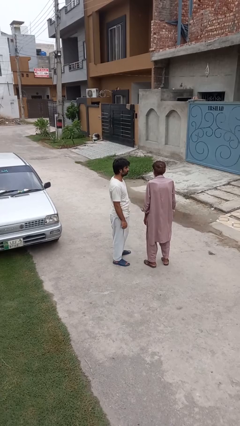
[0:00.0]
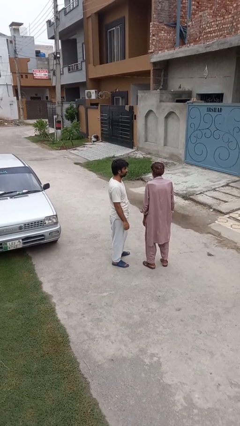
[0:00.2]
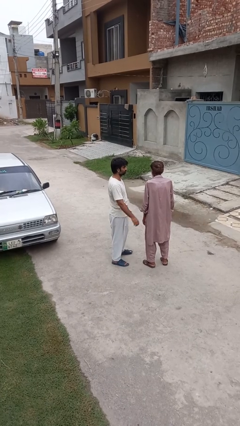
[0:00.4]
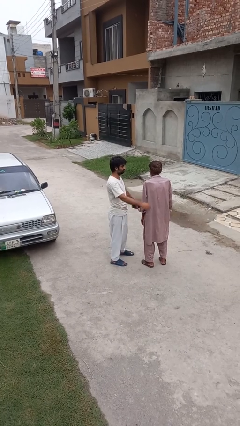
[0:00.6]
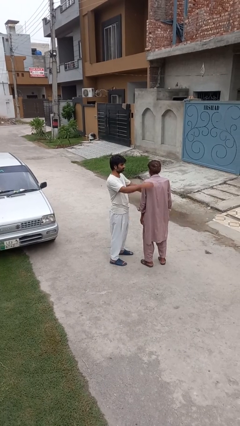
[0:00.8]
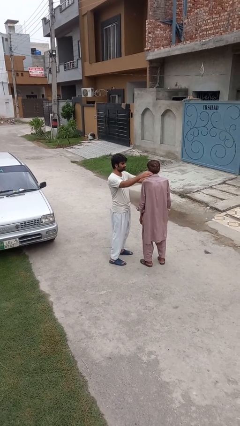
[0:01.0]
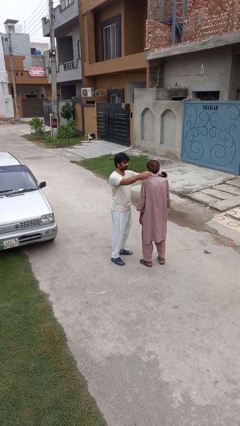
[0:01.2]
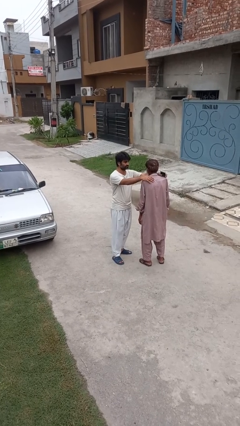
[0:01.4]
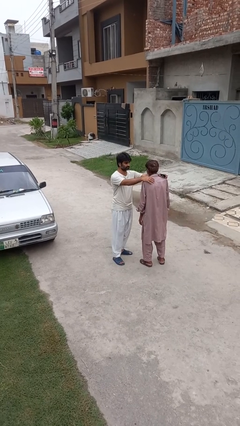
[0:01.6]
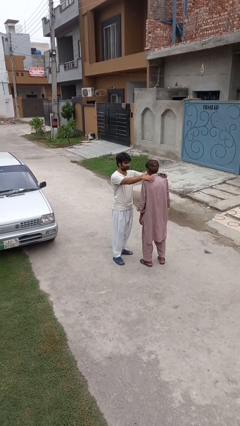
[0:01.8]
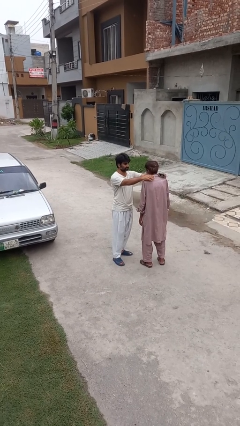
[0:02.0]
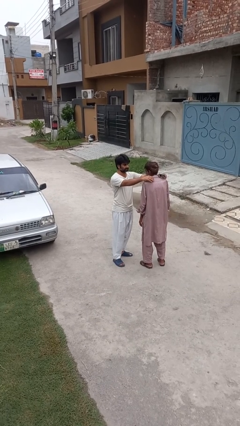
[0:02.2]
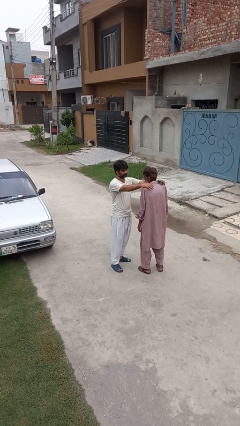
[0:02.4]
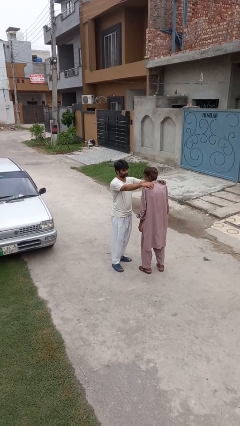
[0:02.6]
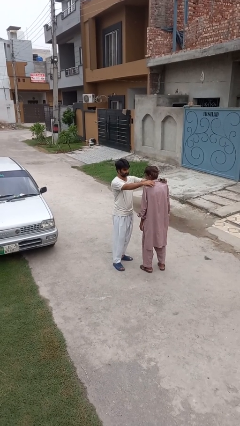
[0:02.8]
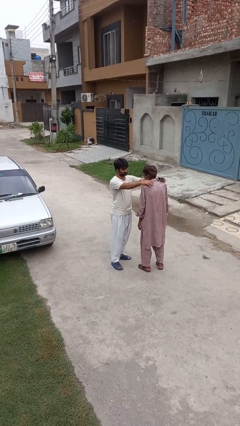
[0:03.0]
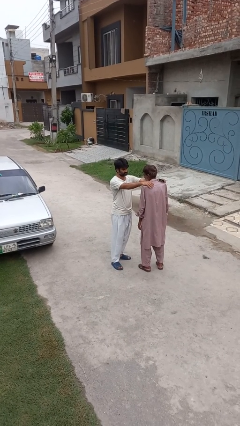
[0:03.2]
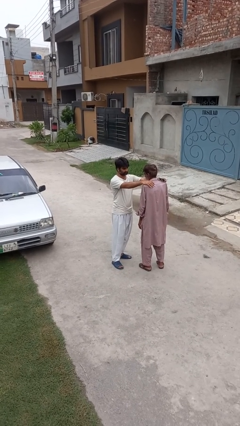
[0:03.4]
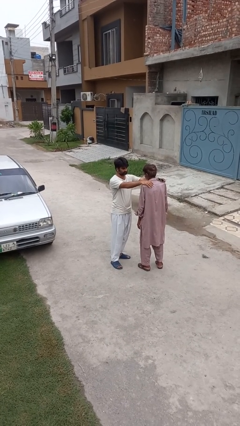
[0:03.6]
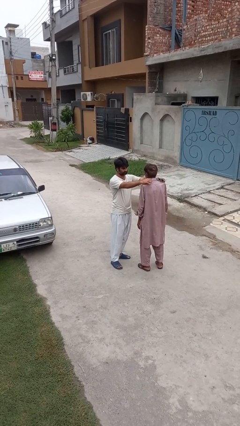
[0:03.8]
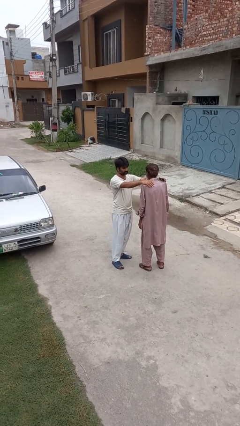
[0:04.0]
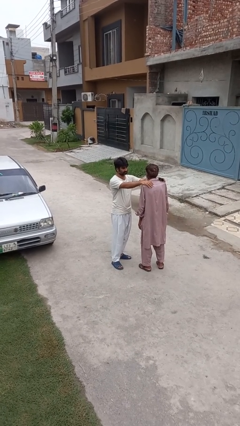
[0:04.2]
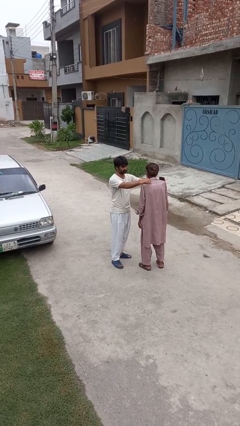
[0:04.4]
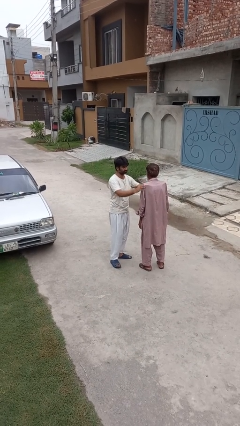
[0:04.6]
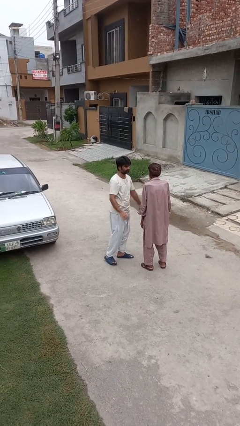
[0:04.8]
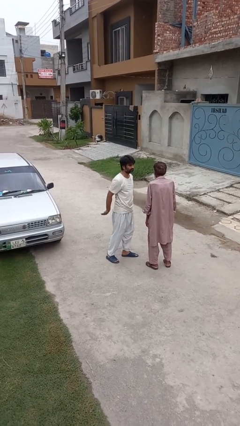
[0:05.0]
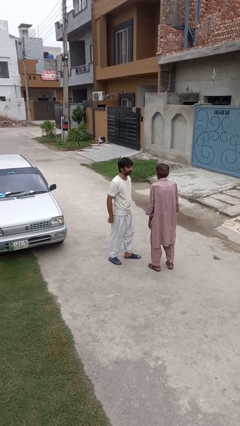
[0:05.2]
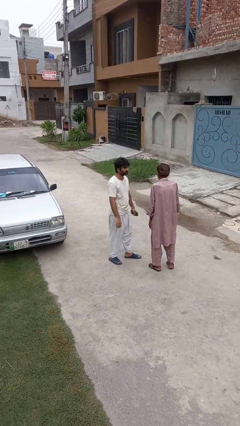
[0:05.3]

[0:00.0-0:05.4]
person pounds shoulders of person

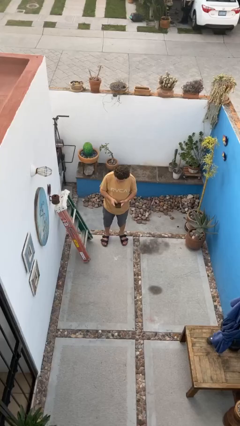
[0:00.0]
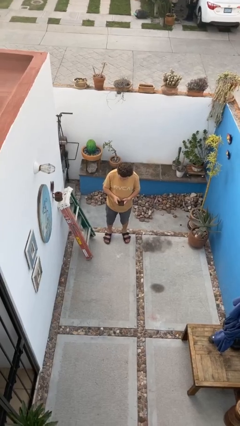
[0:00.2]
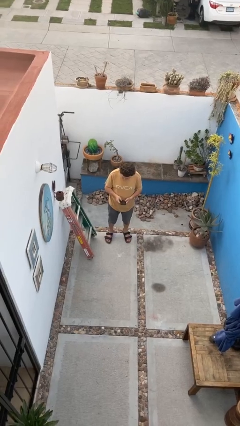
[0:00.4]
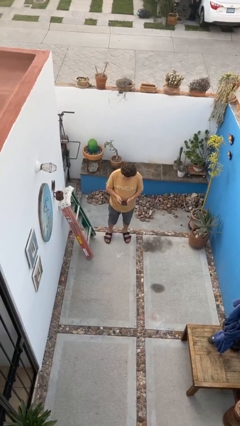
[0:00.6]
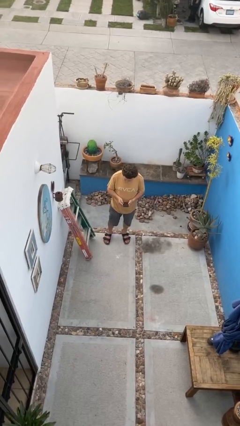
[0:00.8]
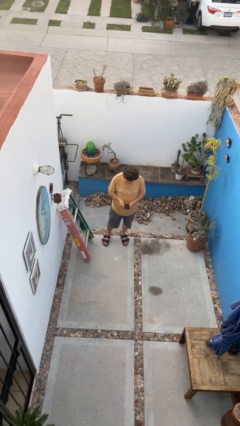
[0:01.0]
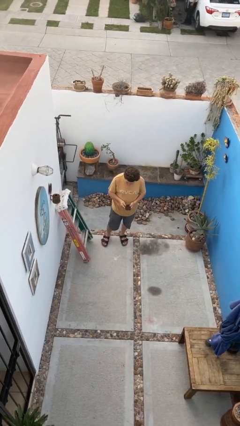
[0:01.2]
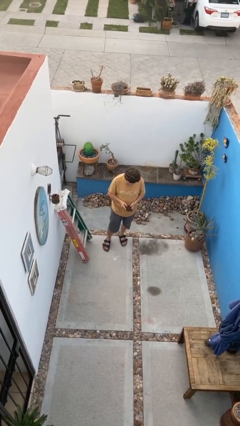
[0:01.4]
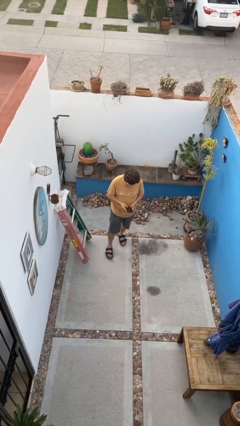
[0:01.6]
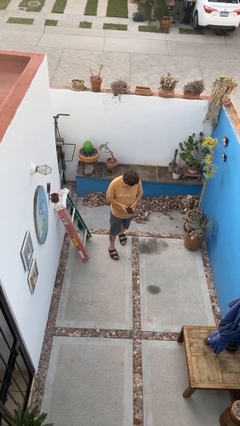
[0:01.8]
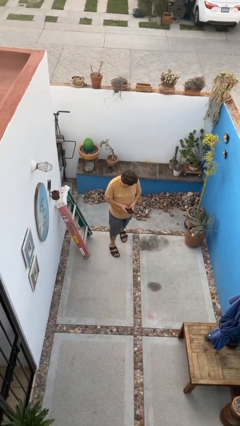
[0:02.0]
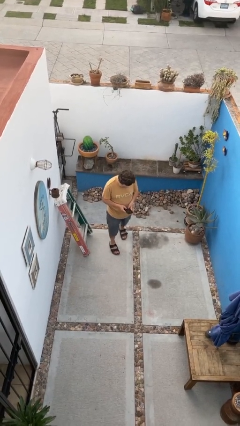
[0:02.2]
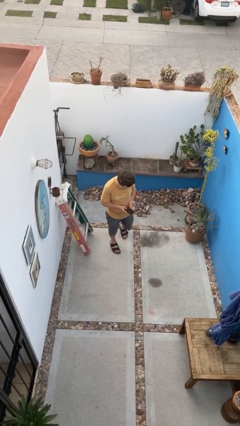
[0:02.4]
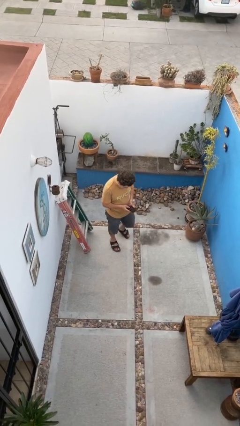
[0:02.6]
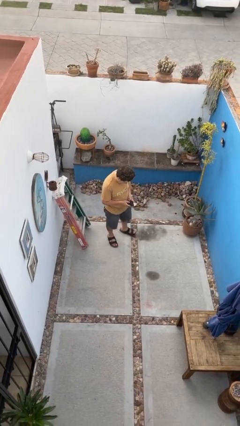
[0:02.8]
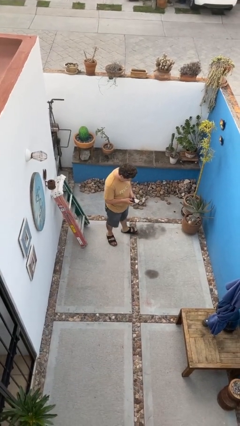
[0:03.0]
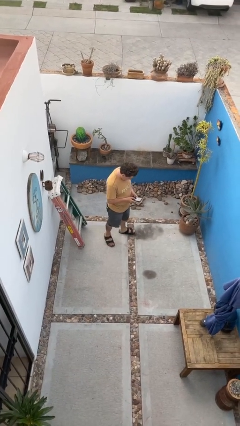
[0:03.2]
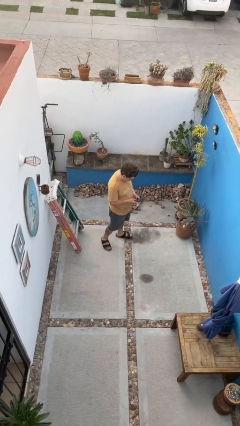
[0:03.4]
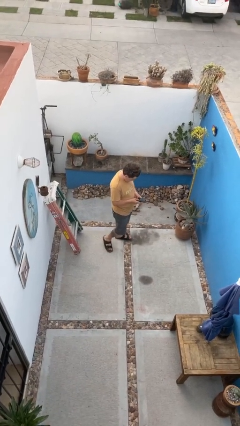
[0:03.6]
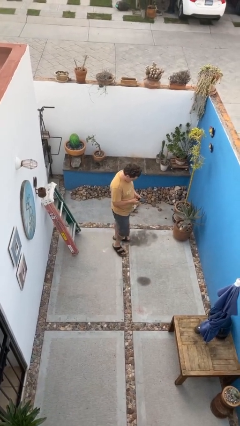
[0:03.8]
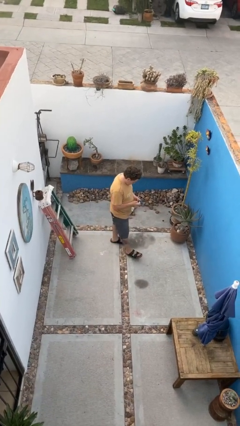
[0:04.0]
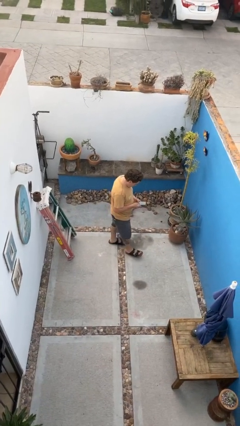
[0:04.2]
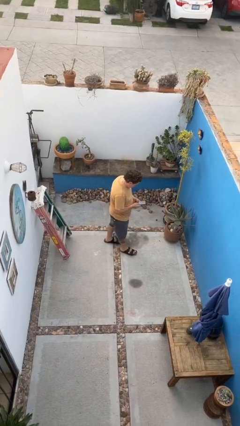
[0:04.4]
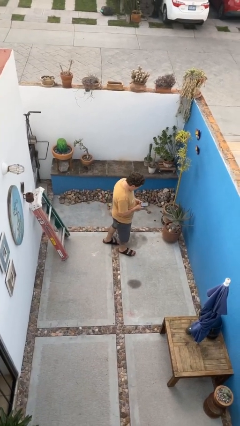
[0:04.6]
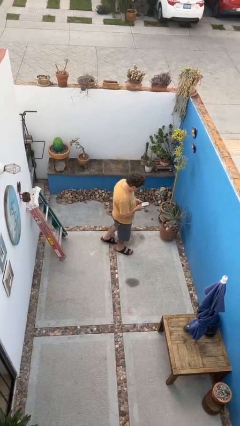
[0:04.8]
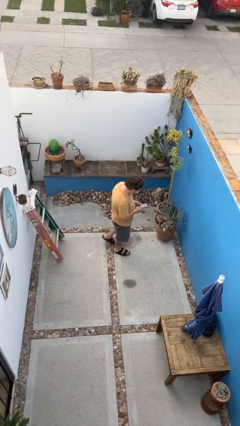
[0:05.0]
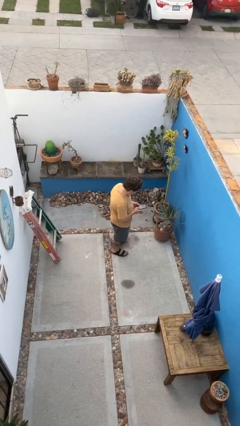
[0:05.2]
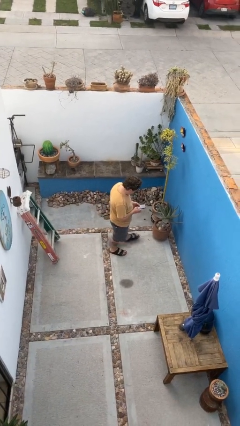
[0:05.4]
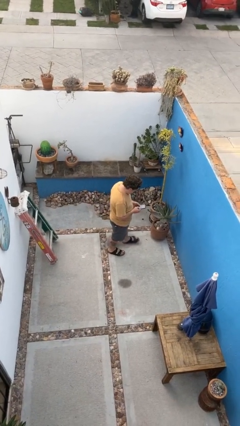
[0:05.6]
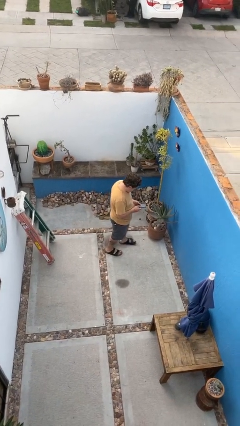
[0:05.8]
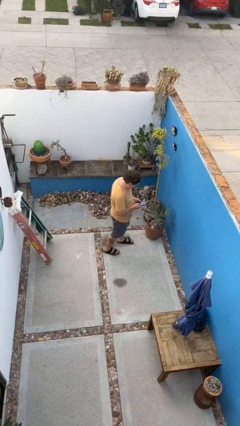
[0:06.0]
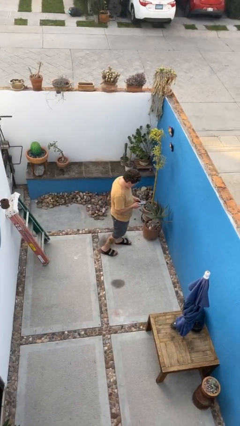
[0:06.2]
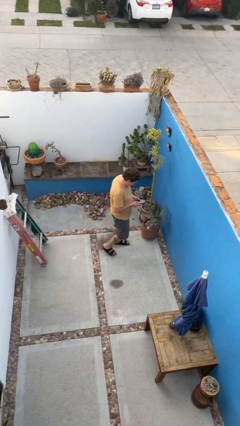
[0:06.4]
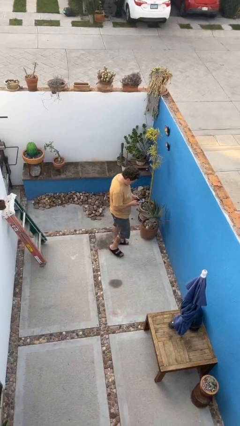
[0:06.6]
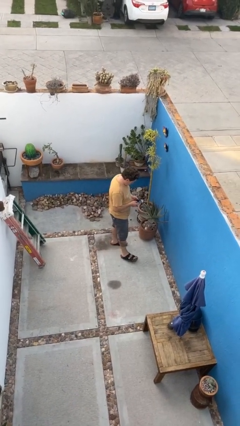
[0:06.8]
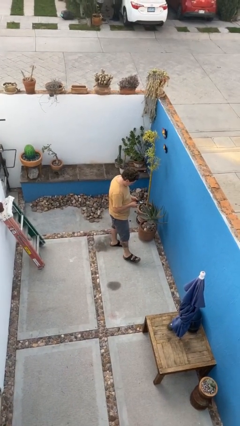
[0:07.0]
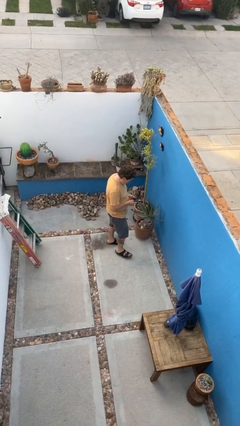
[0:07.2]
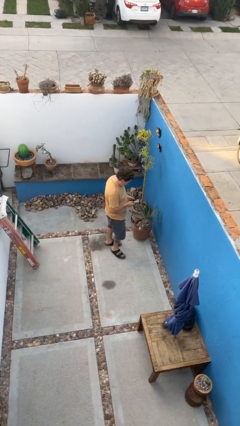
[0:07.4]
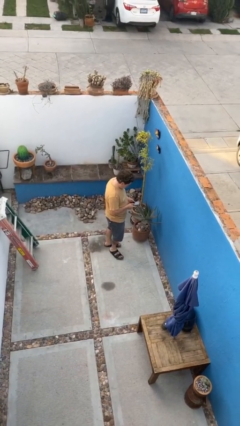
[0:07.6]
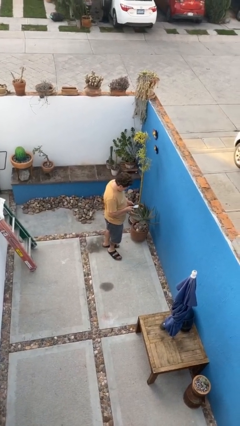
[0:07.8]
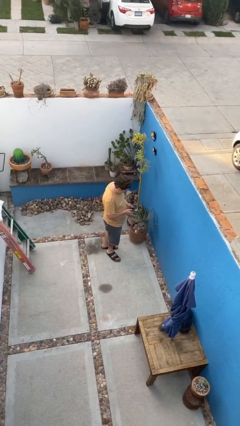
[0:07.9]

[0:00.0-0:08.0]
person texts on phone

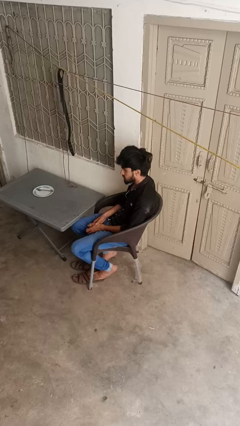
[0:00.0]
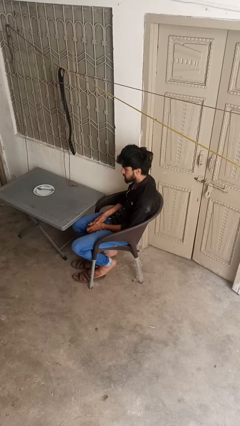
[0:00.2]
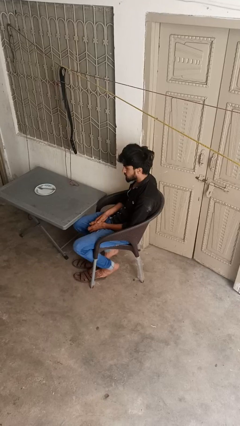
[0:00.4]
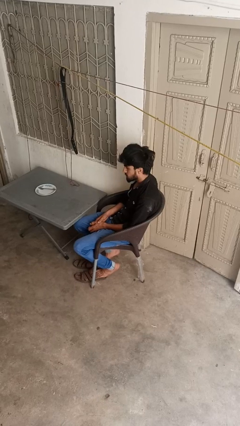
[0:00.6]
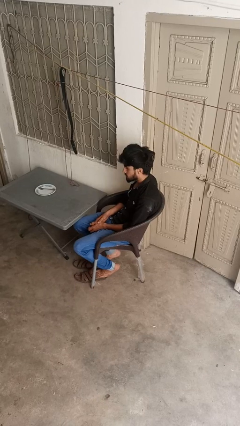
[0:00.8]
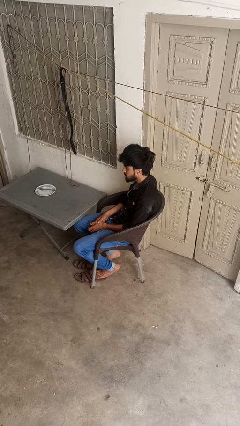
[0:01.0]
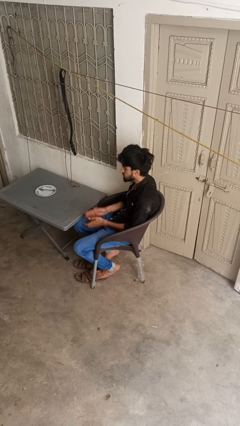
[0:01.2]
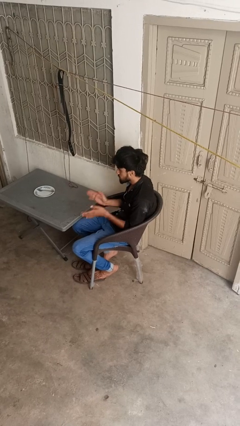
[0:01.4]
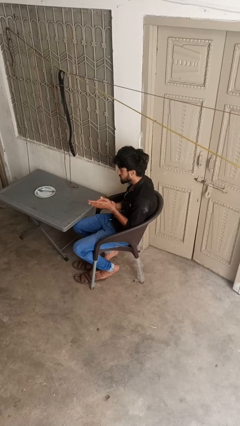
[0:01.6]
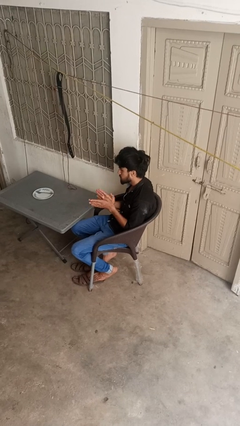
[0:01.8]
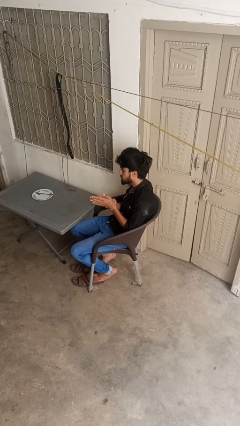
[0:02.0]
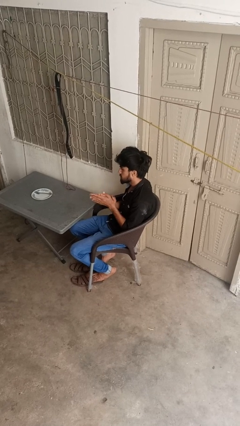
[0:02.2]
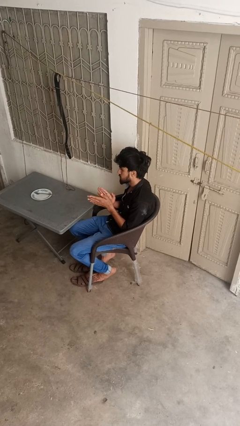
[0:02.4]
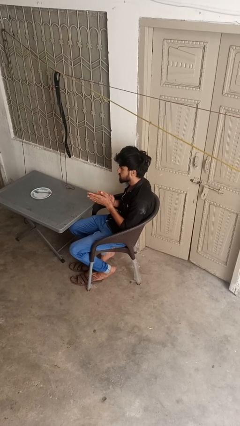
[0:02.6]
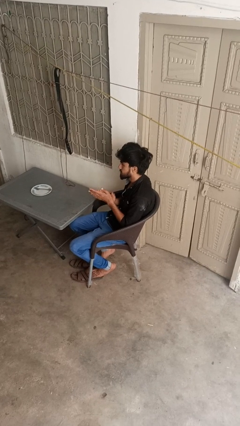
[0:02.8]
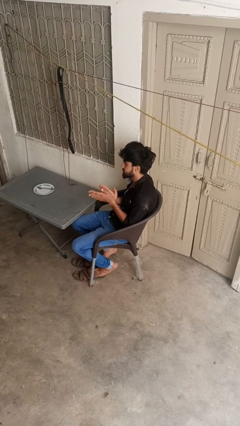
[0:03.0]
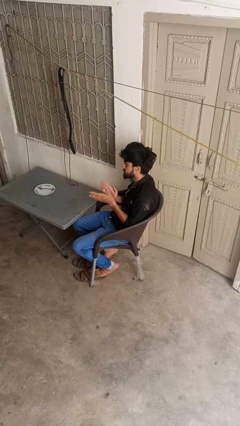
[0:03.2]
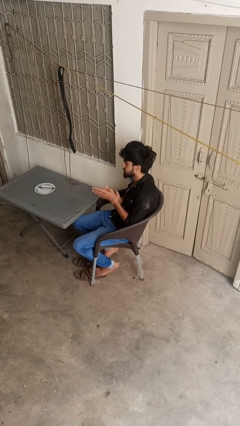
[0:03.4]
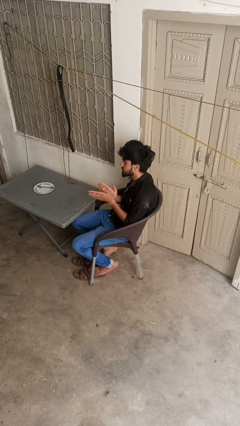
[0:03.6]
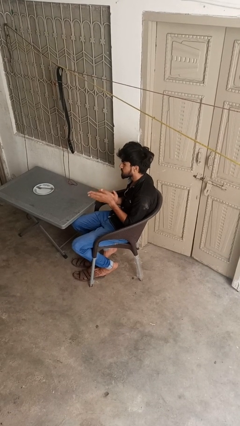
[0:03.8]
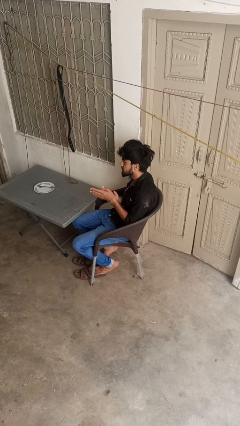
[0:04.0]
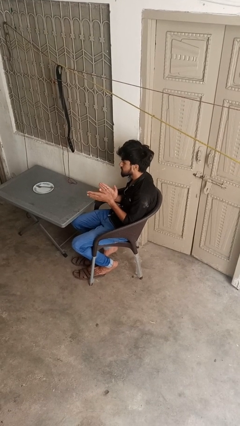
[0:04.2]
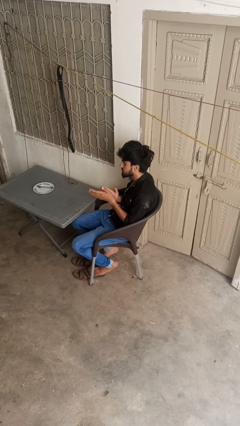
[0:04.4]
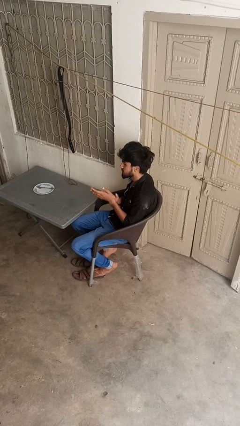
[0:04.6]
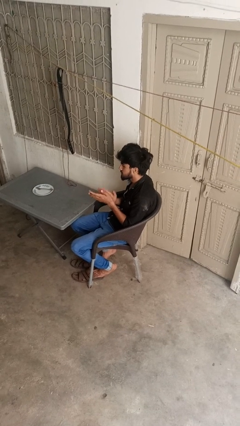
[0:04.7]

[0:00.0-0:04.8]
person claps hands
